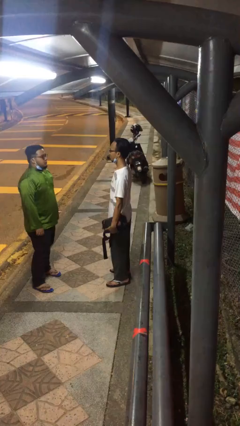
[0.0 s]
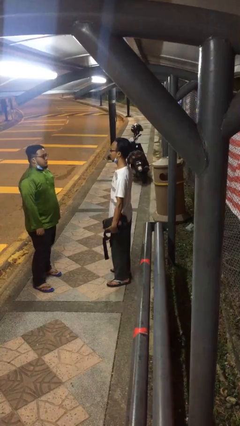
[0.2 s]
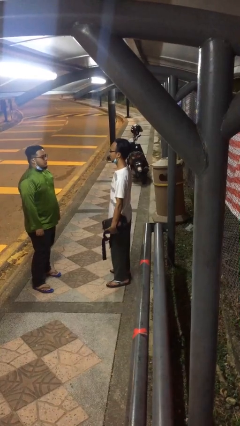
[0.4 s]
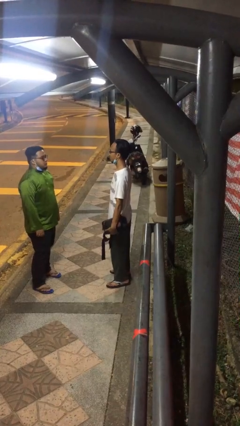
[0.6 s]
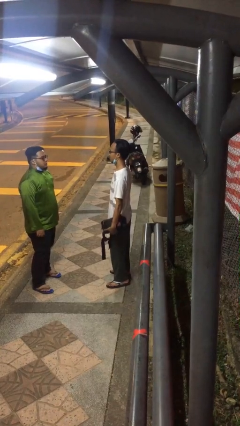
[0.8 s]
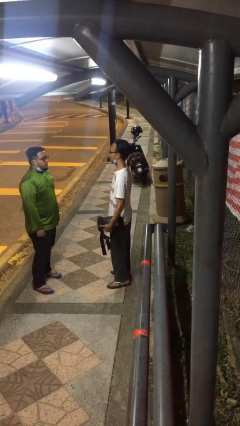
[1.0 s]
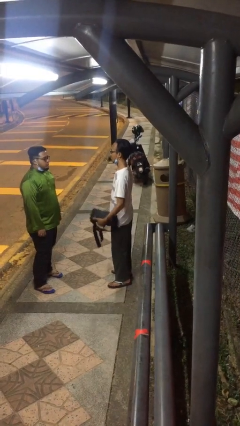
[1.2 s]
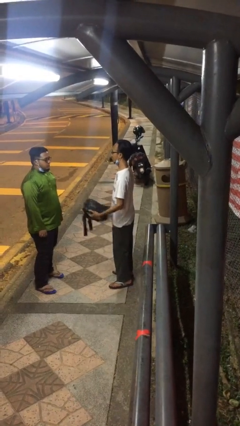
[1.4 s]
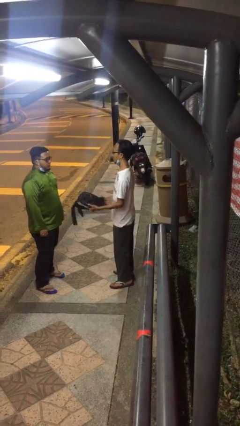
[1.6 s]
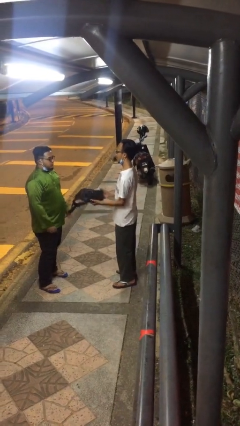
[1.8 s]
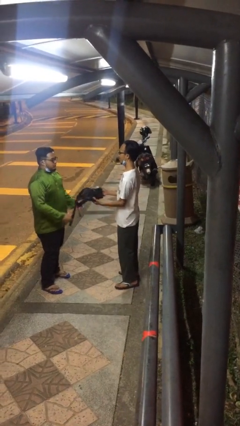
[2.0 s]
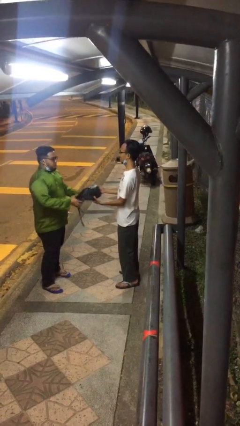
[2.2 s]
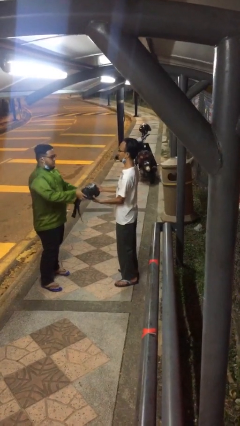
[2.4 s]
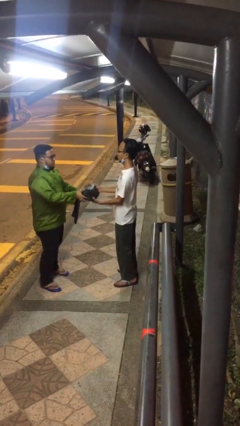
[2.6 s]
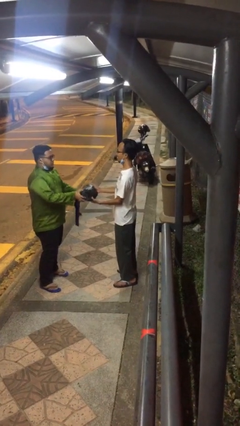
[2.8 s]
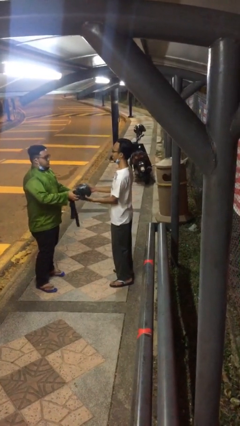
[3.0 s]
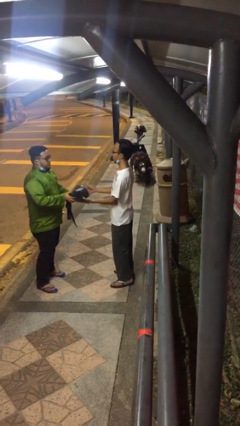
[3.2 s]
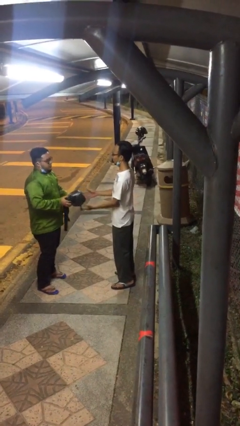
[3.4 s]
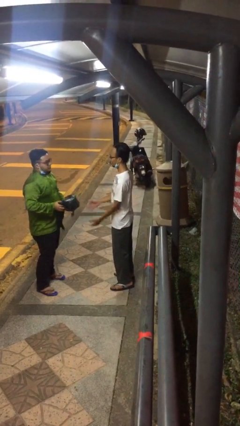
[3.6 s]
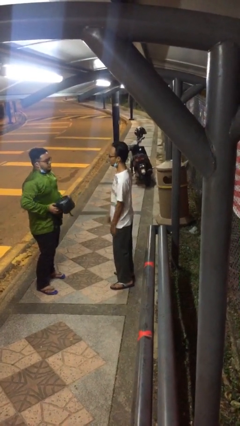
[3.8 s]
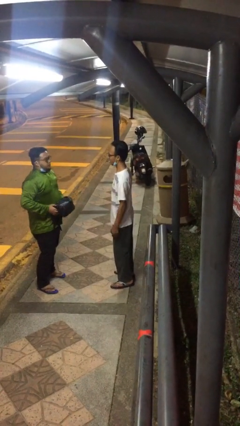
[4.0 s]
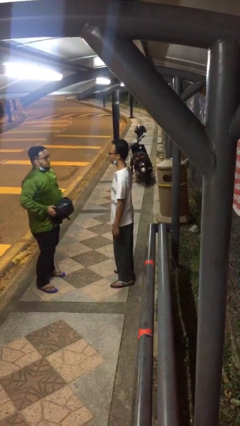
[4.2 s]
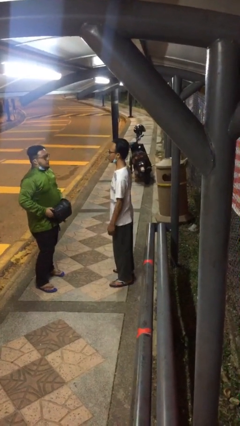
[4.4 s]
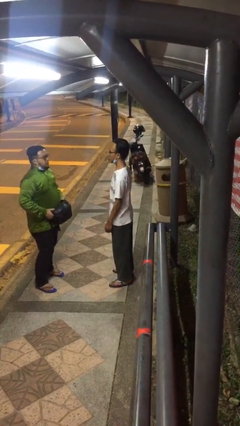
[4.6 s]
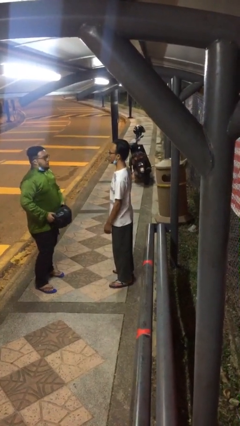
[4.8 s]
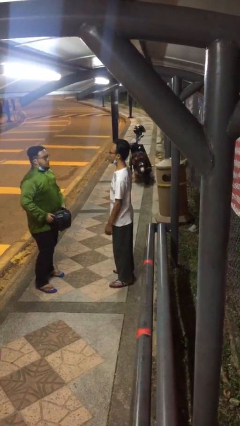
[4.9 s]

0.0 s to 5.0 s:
person transfers object to person

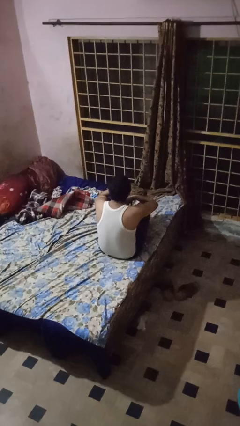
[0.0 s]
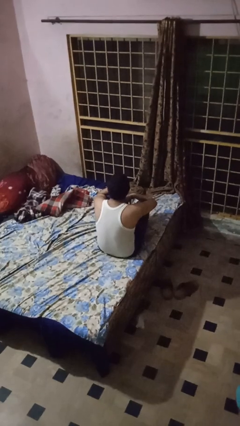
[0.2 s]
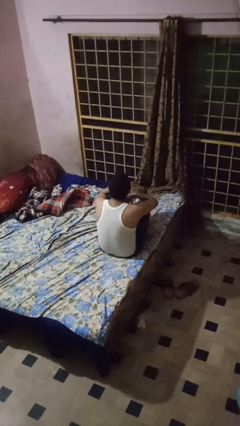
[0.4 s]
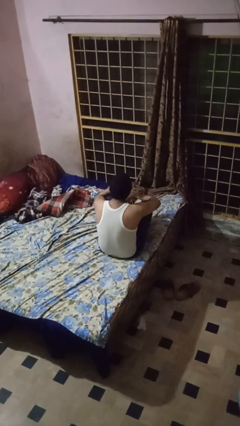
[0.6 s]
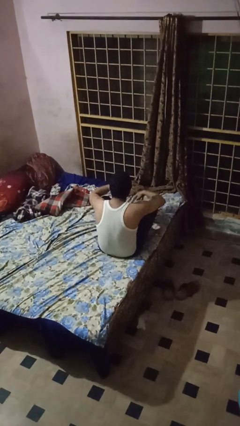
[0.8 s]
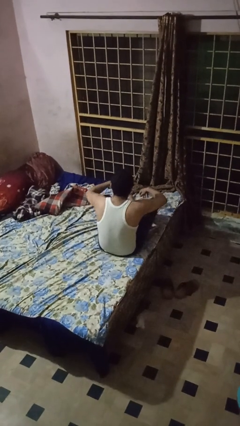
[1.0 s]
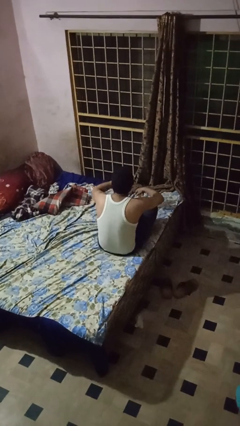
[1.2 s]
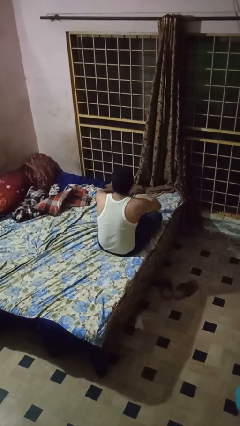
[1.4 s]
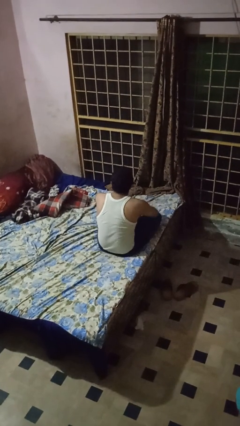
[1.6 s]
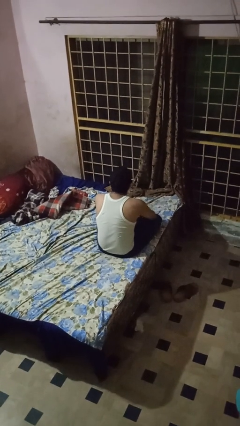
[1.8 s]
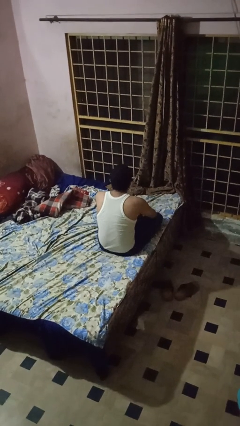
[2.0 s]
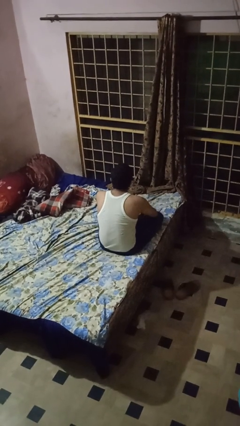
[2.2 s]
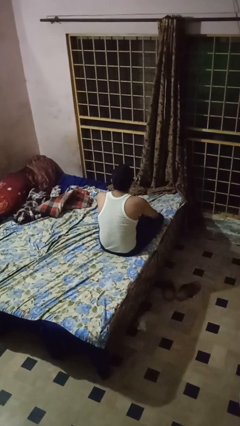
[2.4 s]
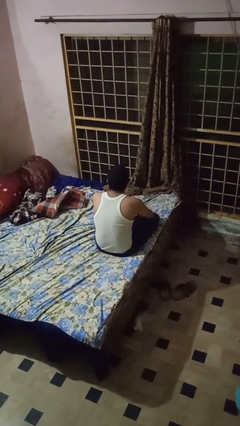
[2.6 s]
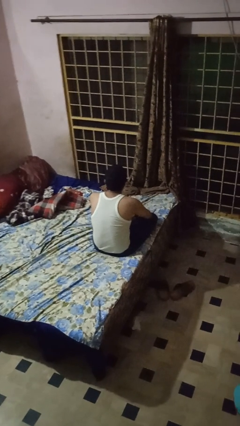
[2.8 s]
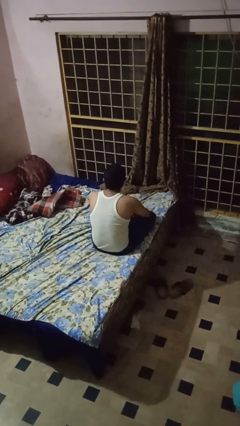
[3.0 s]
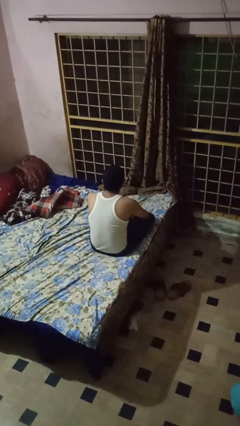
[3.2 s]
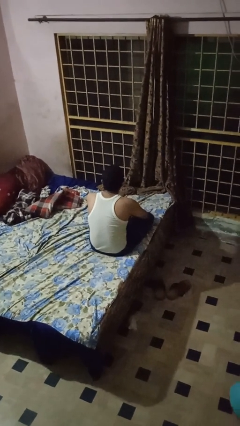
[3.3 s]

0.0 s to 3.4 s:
person crosses legs

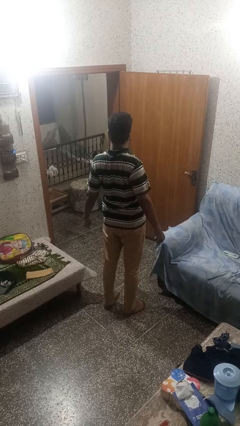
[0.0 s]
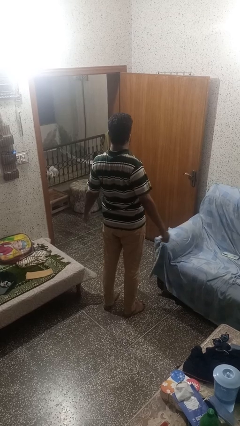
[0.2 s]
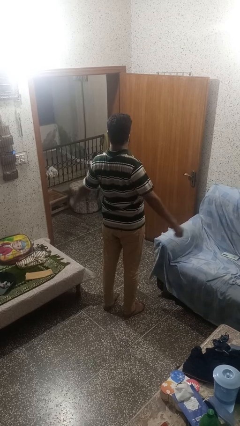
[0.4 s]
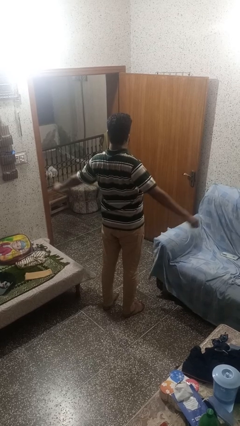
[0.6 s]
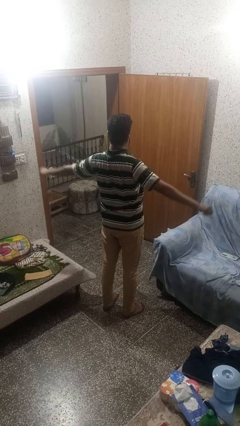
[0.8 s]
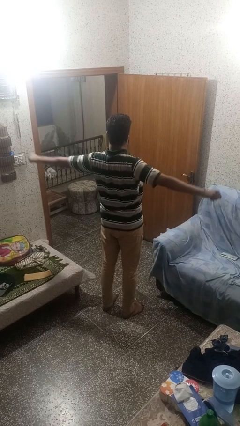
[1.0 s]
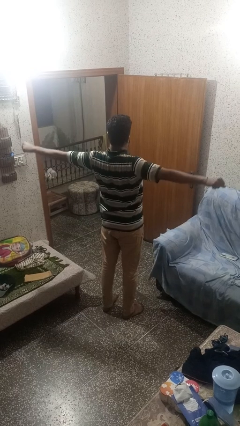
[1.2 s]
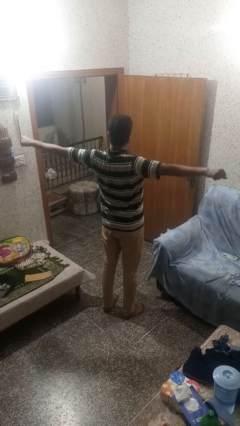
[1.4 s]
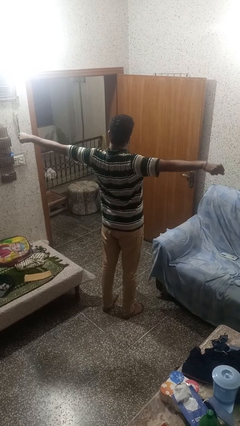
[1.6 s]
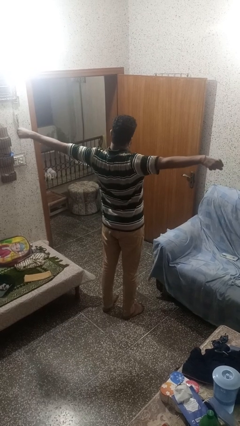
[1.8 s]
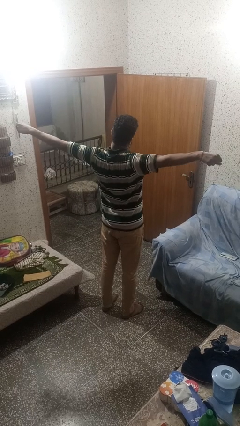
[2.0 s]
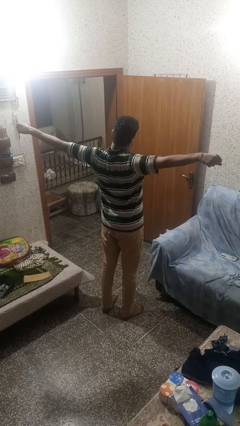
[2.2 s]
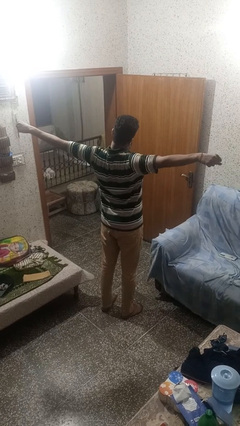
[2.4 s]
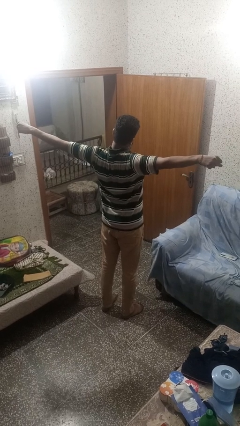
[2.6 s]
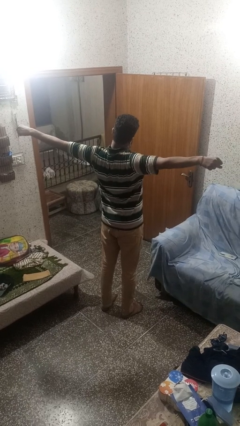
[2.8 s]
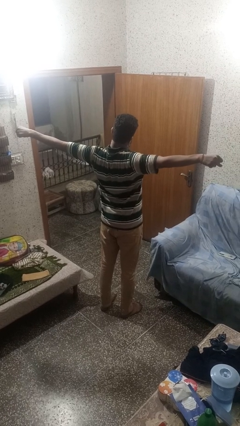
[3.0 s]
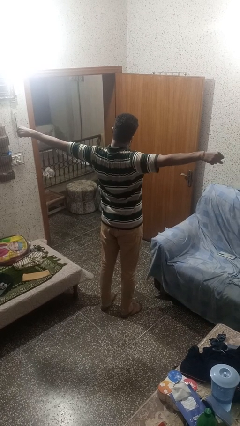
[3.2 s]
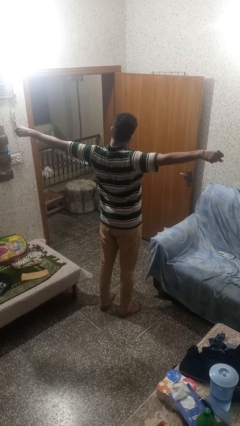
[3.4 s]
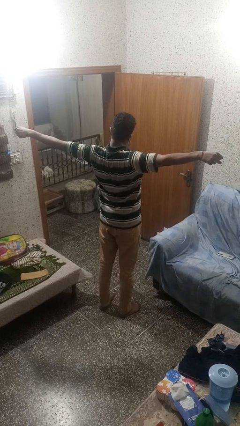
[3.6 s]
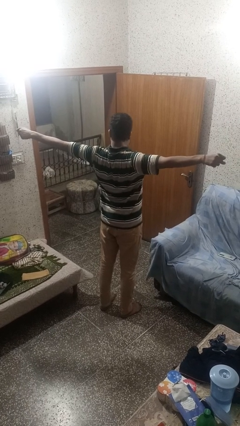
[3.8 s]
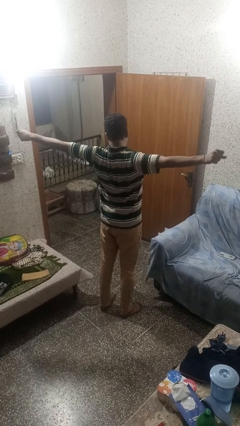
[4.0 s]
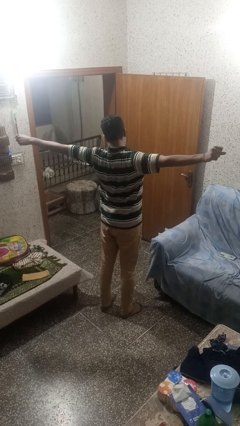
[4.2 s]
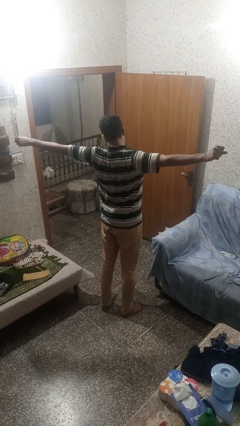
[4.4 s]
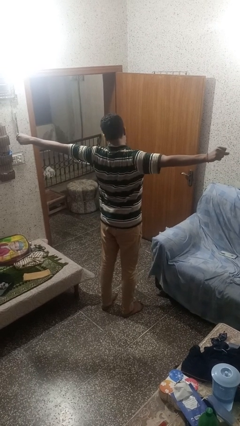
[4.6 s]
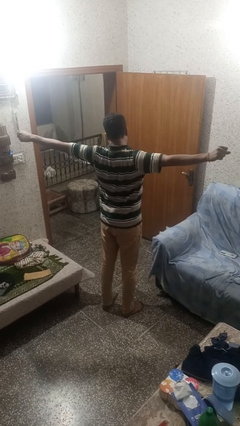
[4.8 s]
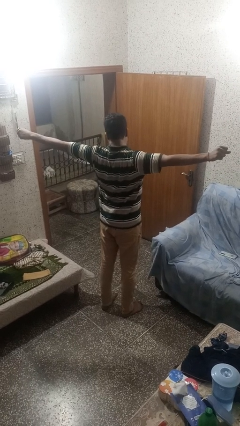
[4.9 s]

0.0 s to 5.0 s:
person stretches arms to side

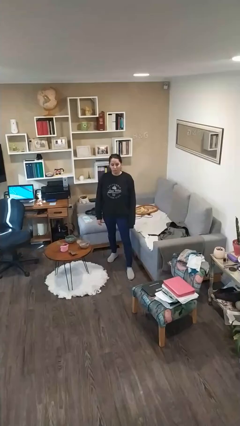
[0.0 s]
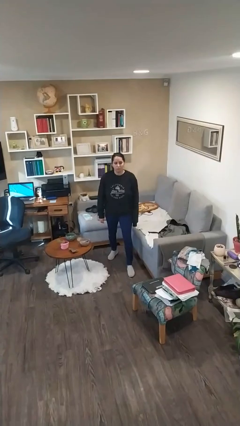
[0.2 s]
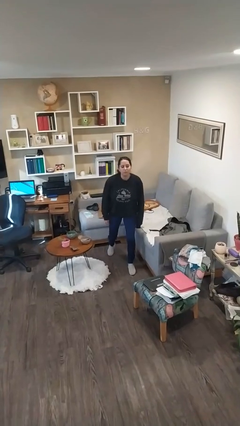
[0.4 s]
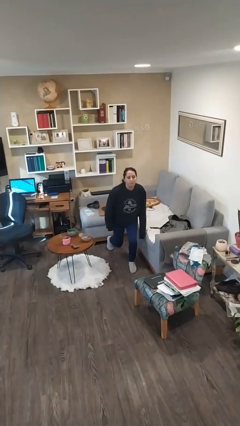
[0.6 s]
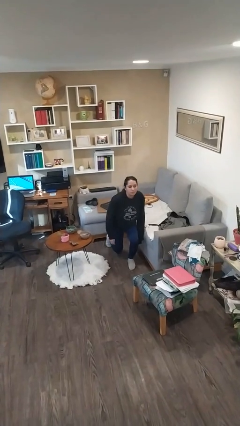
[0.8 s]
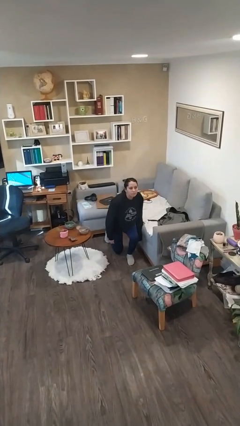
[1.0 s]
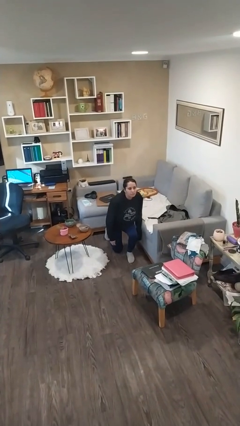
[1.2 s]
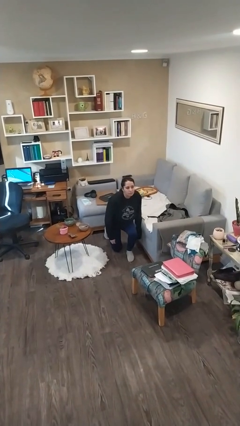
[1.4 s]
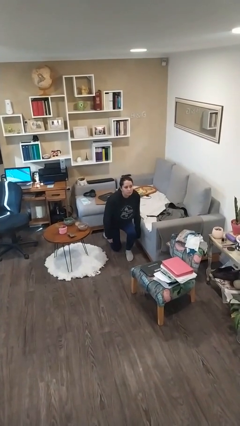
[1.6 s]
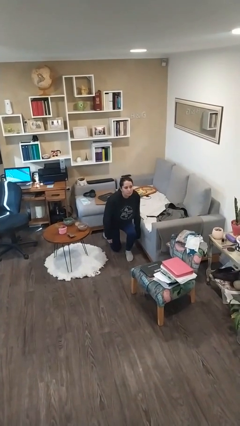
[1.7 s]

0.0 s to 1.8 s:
person kneels

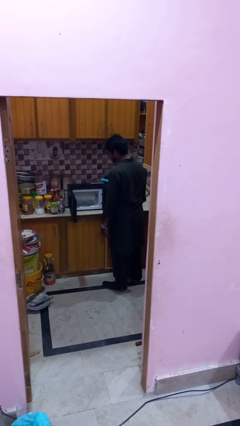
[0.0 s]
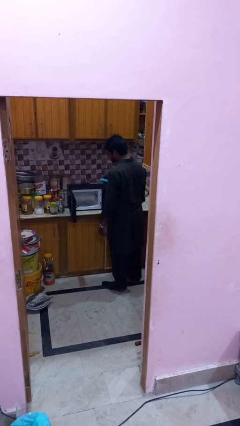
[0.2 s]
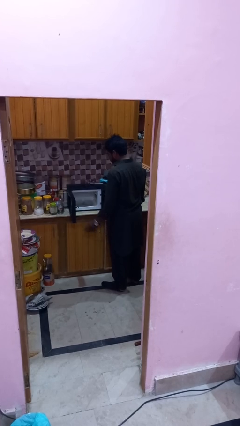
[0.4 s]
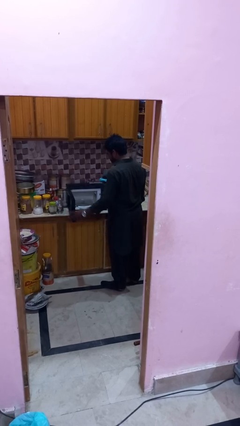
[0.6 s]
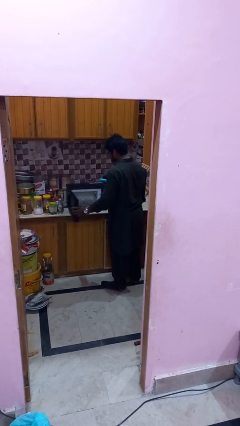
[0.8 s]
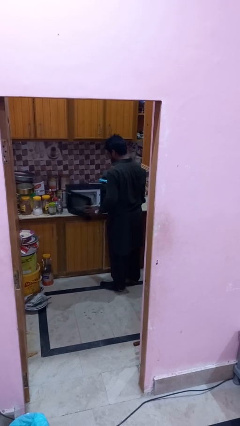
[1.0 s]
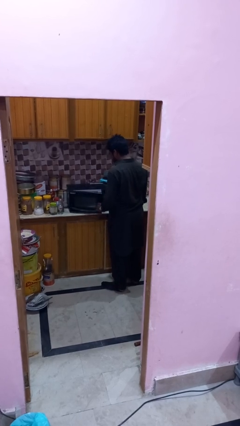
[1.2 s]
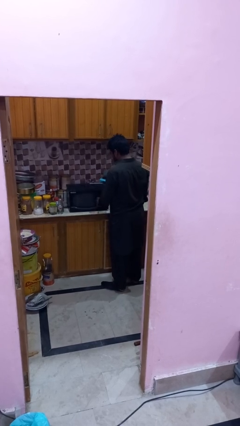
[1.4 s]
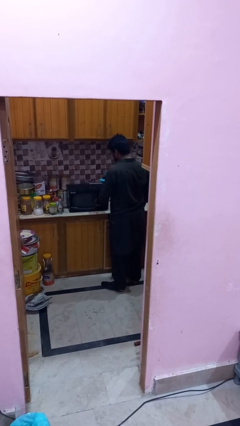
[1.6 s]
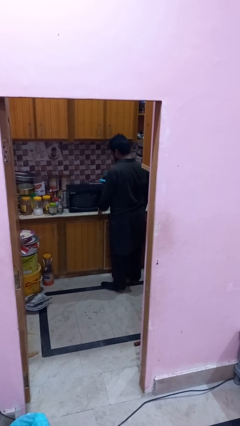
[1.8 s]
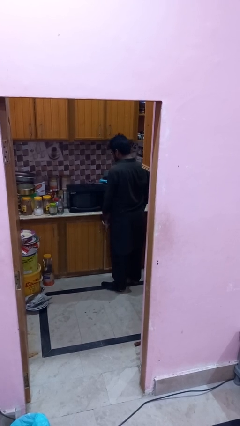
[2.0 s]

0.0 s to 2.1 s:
person closes oven door
